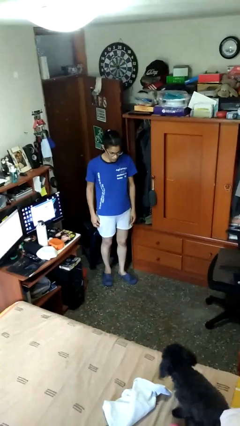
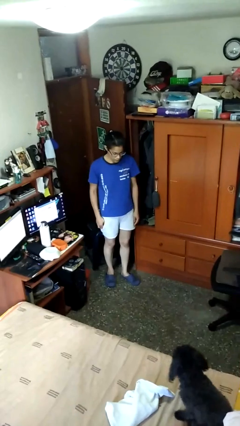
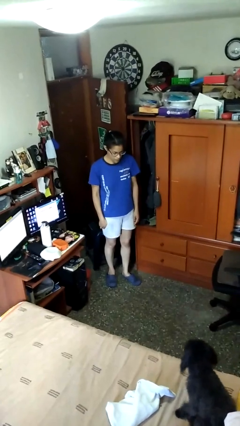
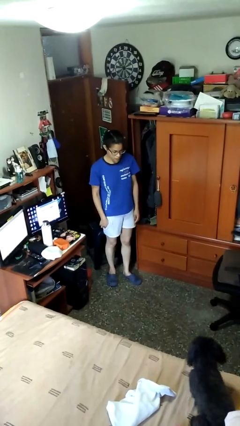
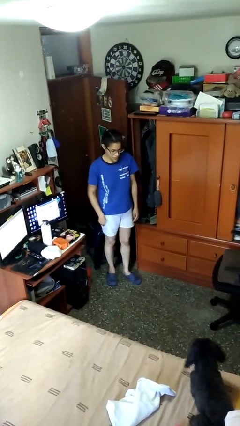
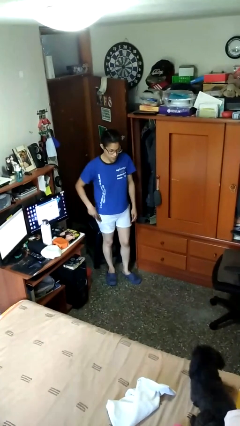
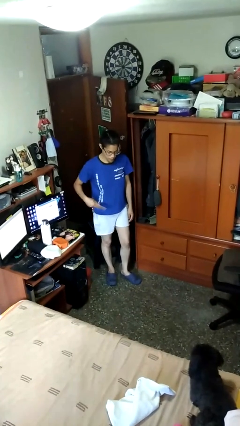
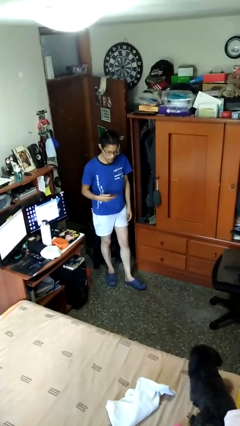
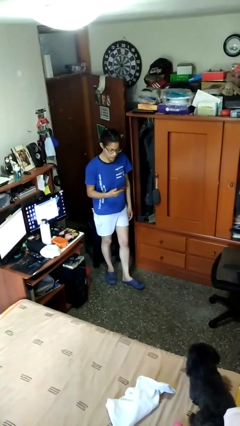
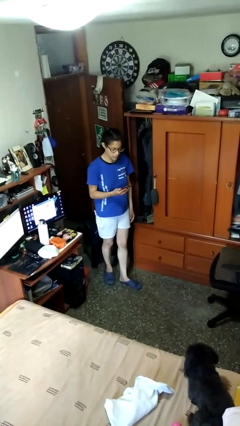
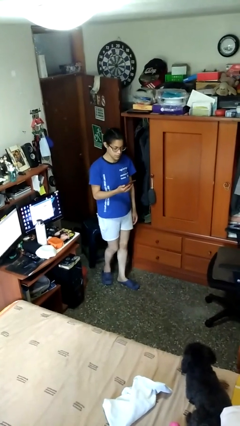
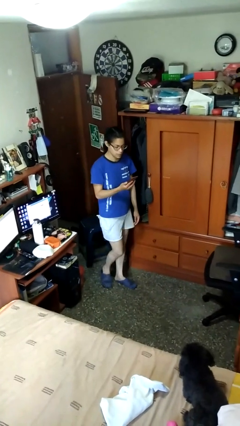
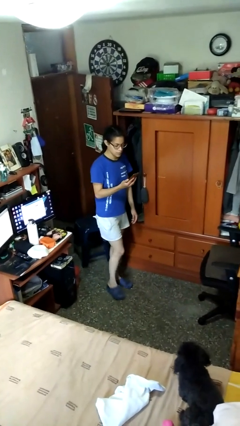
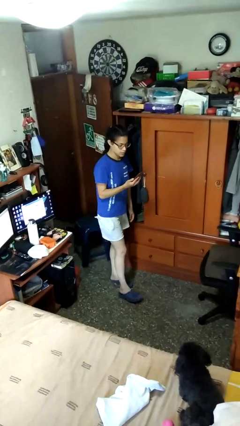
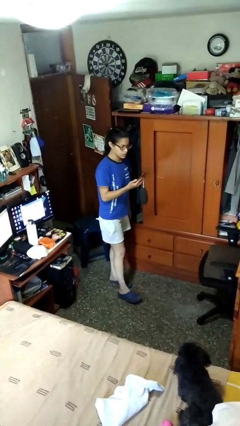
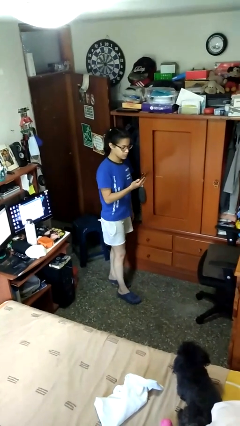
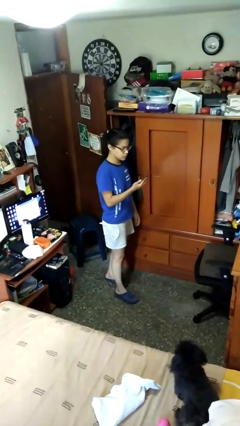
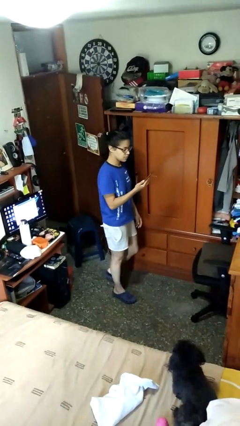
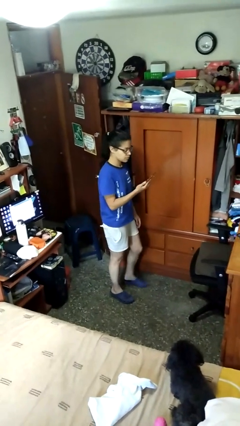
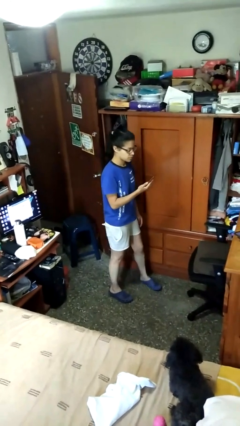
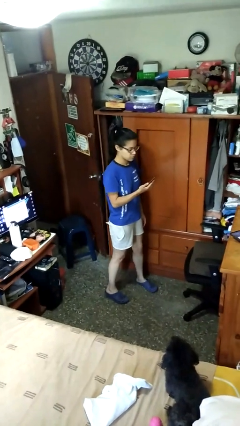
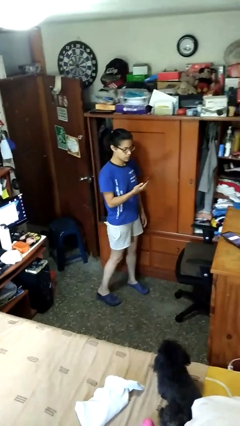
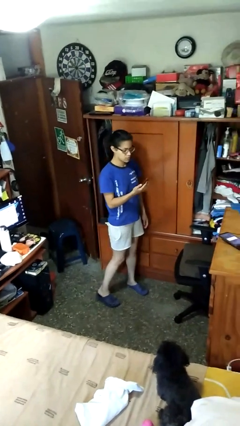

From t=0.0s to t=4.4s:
person takes phone from pocket

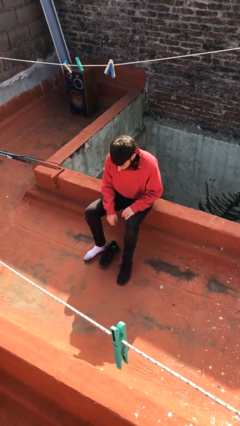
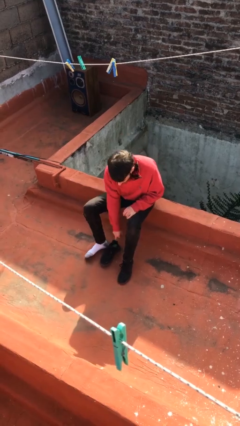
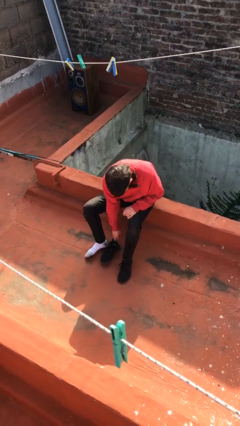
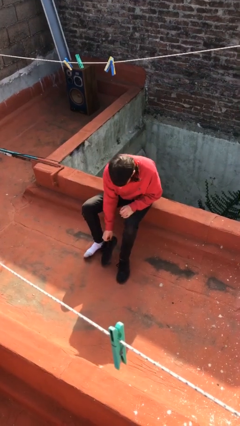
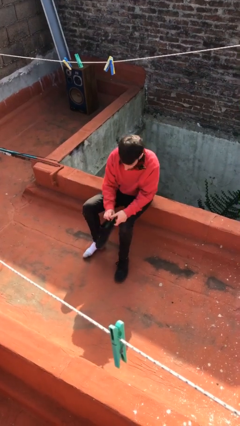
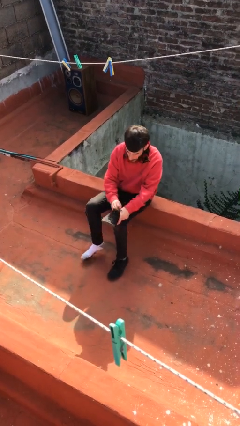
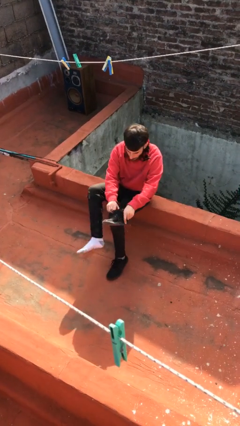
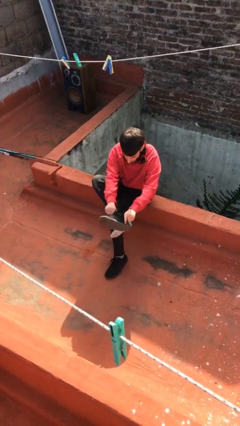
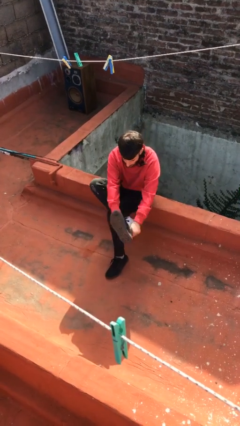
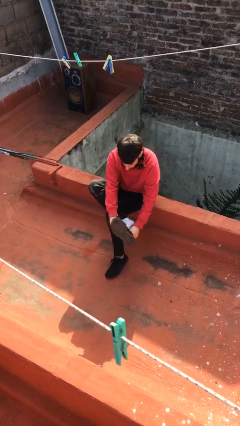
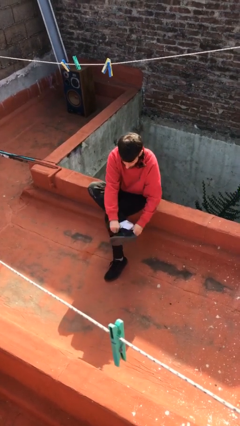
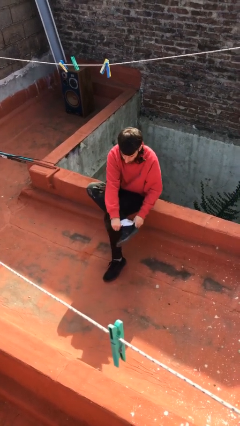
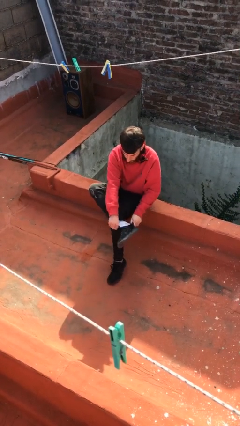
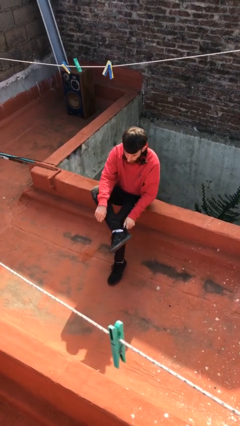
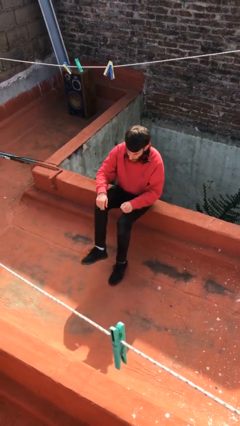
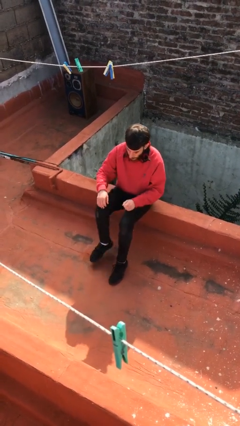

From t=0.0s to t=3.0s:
person puts on shoes

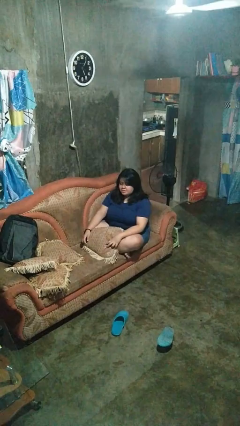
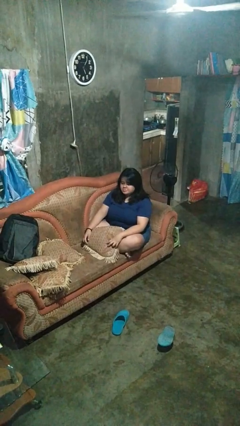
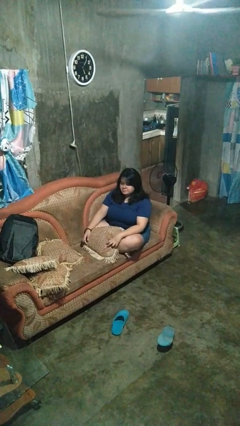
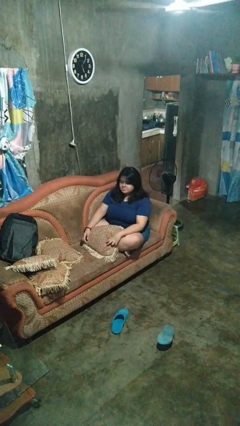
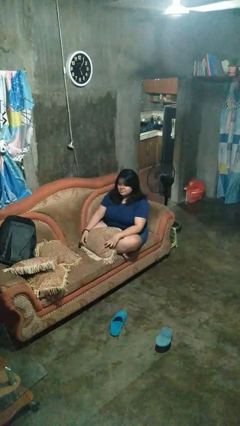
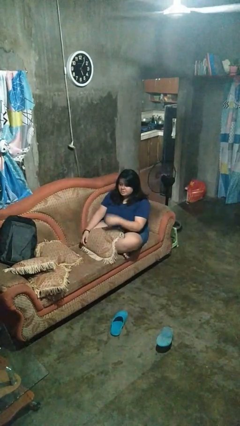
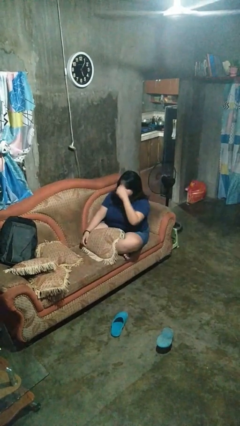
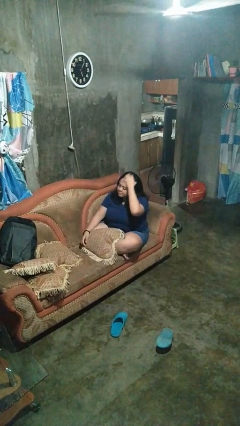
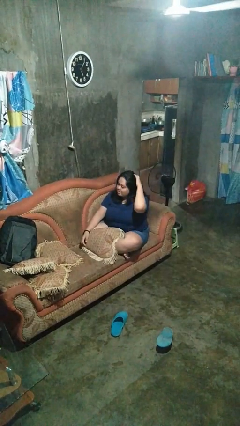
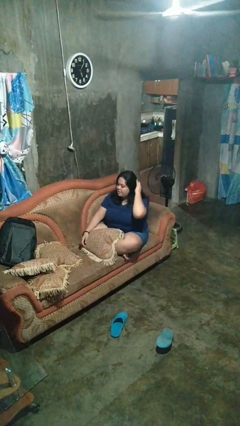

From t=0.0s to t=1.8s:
person strokes hair

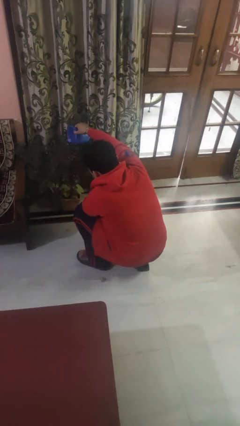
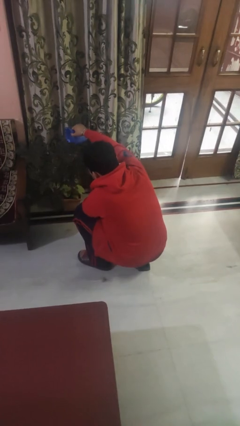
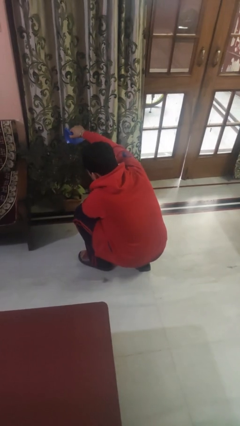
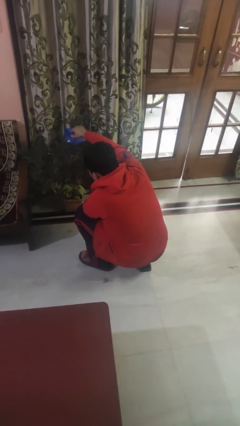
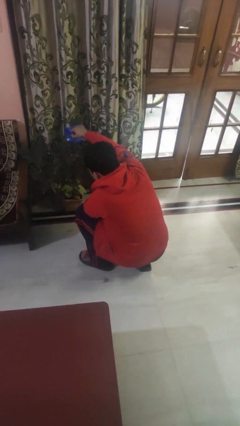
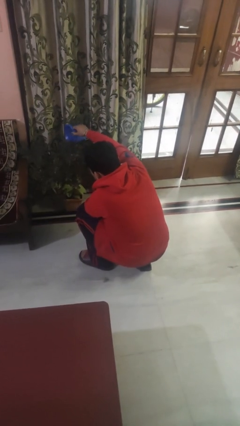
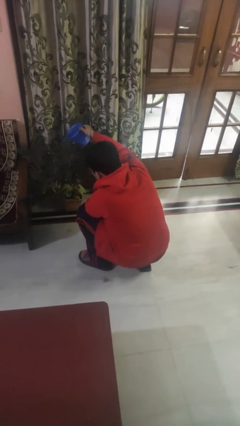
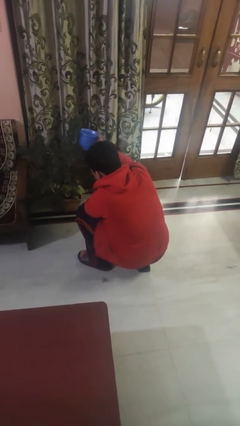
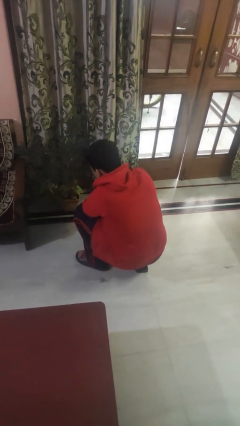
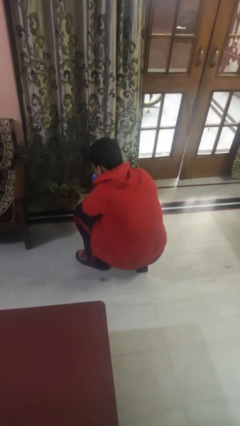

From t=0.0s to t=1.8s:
person waters houseplant

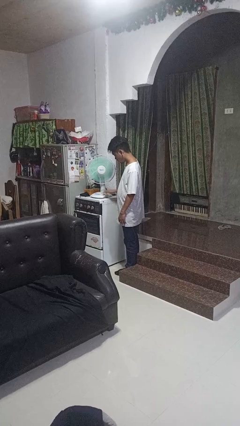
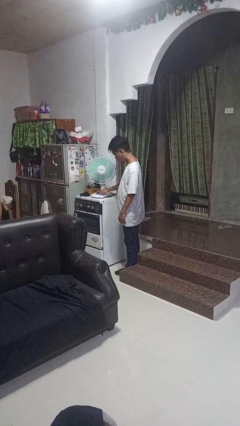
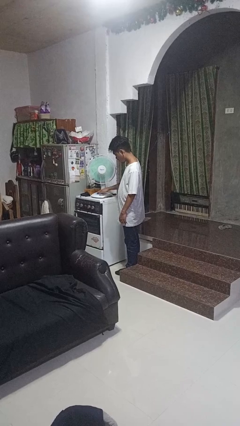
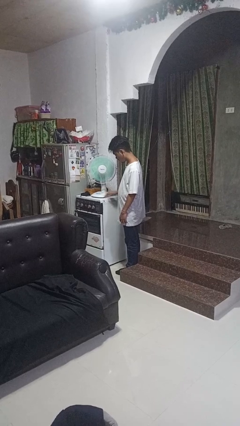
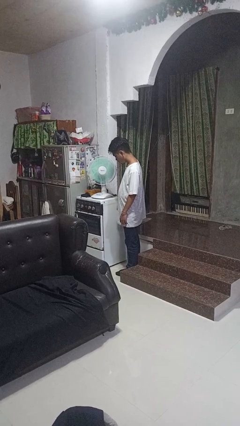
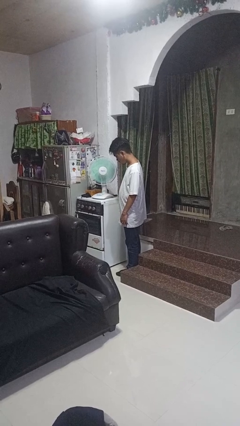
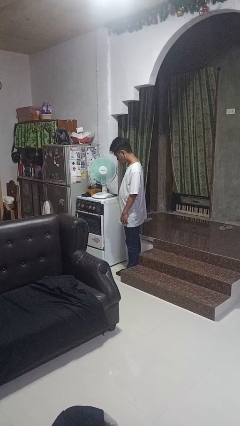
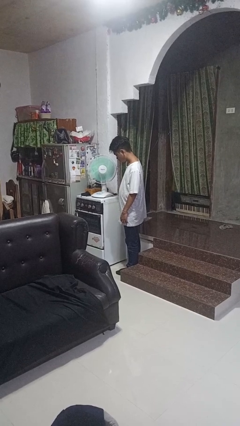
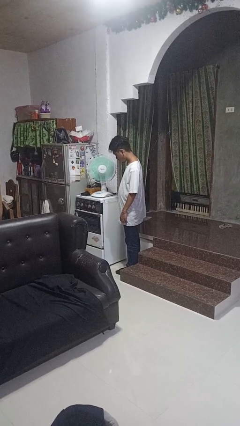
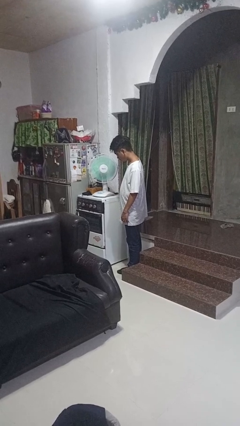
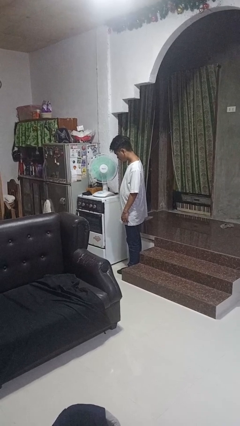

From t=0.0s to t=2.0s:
person turns on fan

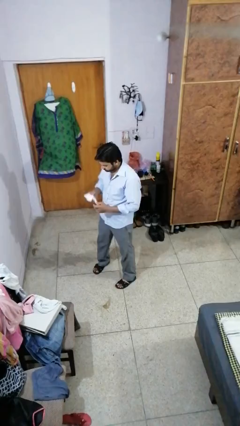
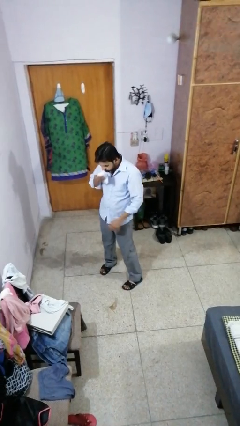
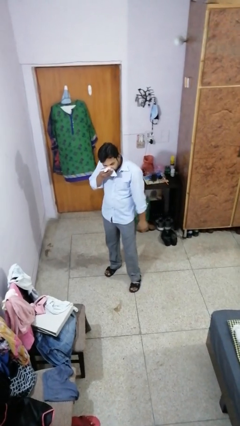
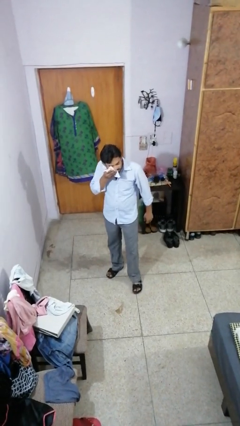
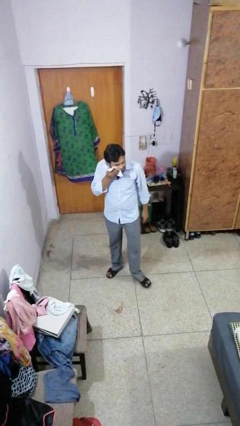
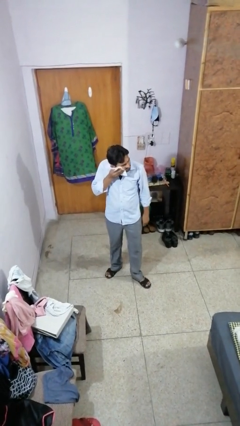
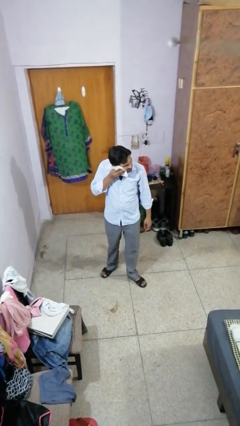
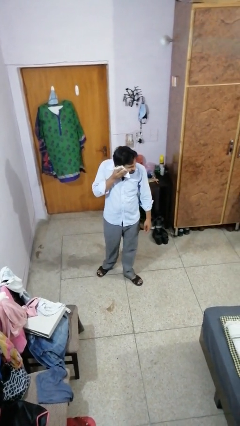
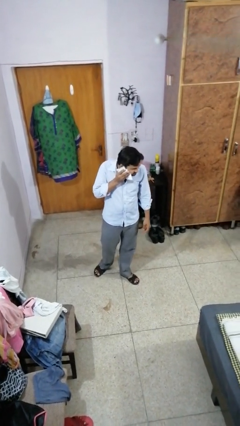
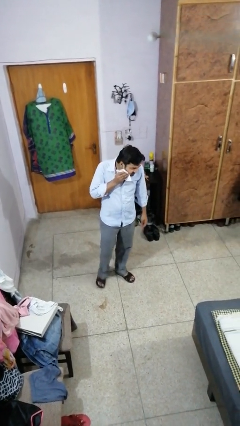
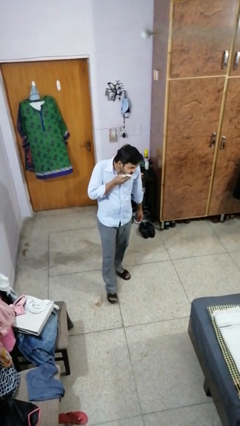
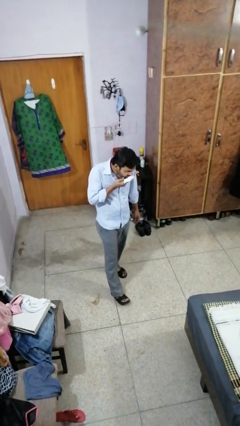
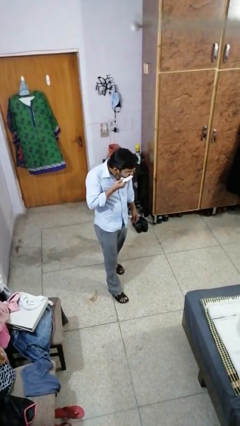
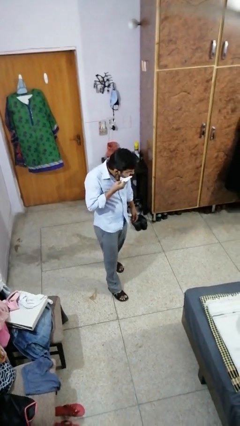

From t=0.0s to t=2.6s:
person wipes mouth with napkin

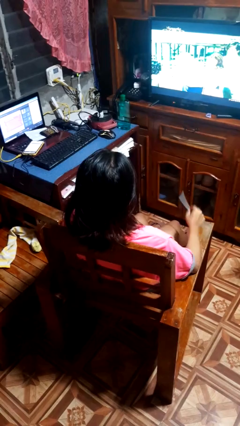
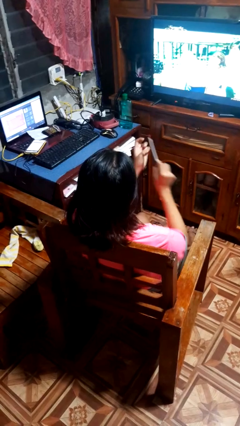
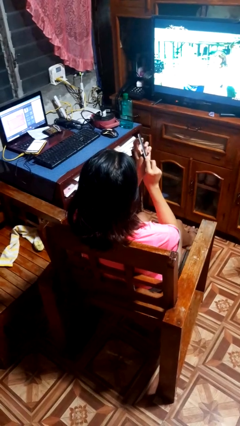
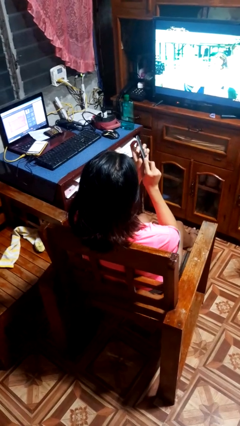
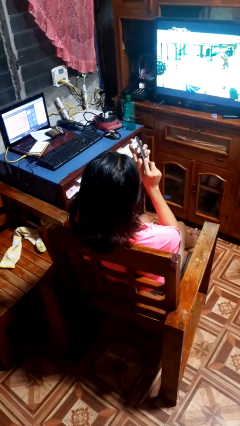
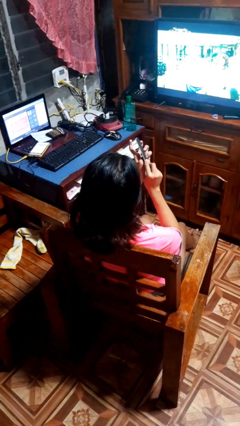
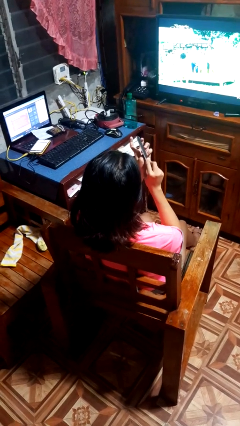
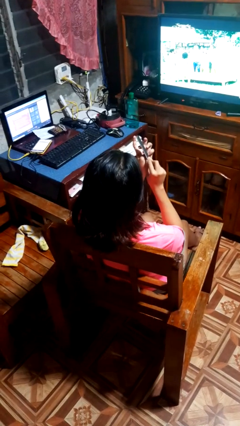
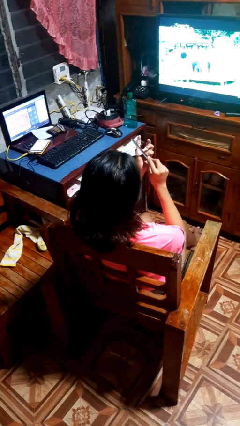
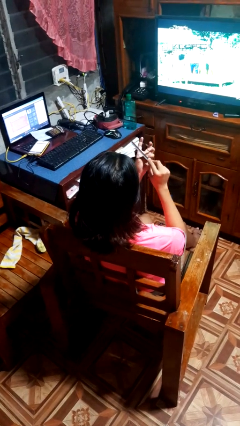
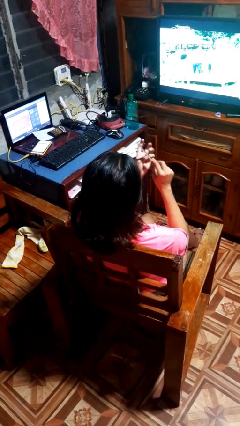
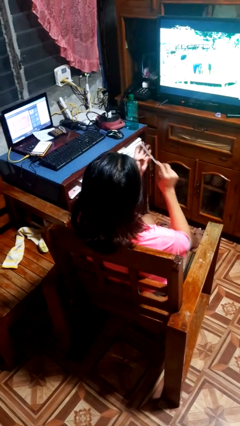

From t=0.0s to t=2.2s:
person files fingernails
